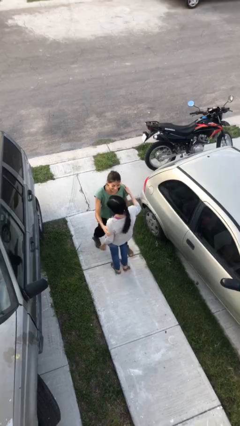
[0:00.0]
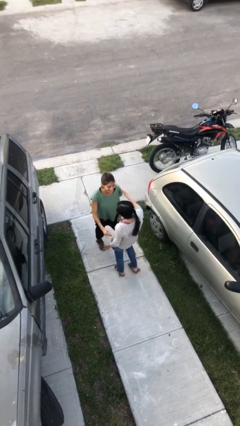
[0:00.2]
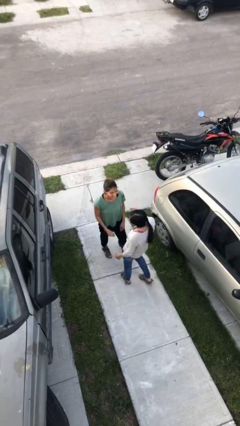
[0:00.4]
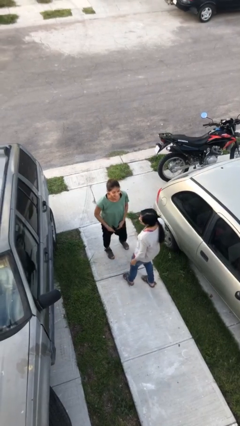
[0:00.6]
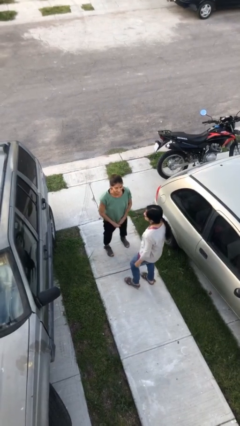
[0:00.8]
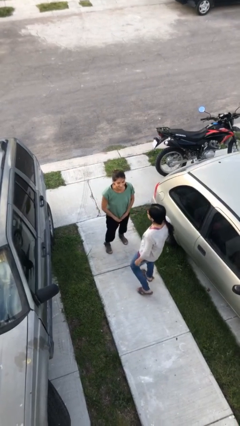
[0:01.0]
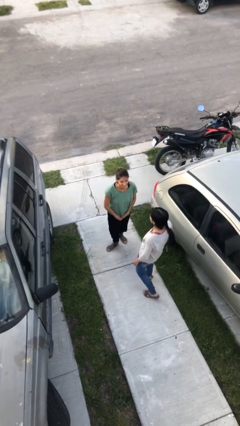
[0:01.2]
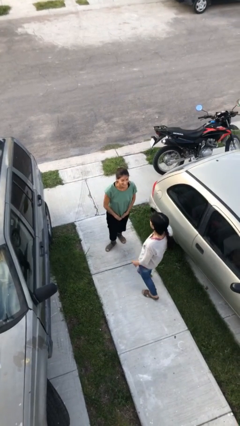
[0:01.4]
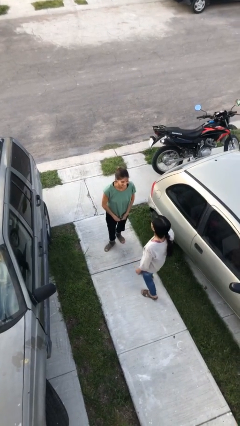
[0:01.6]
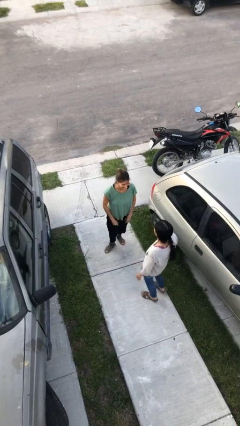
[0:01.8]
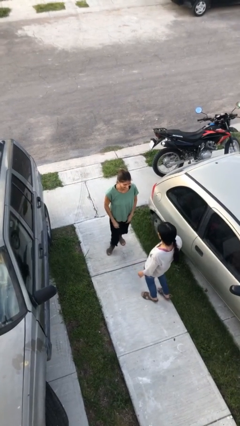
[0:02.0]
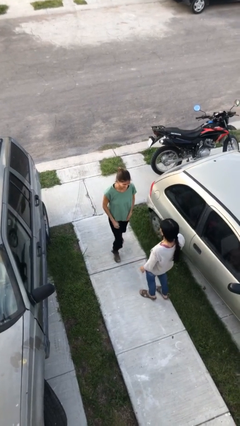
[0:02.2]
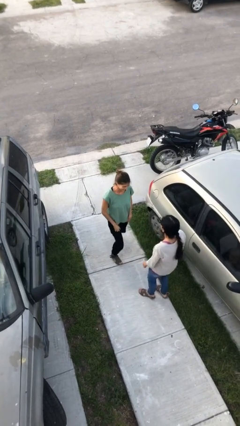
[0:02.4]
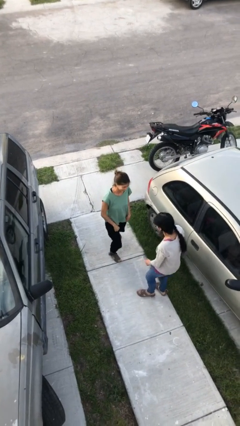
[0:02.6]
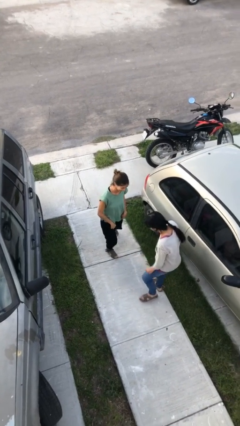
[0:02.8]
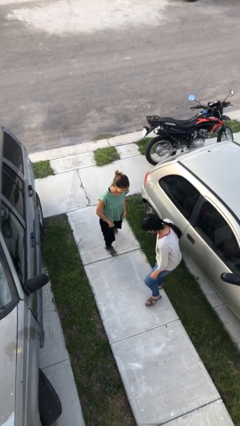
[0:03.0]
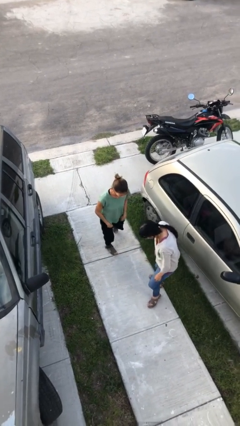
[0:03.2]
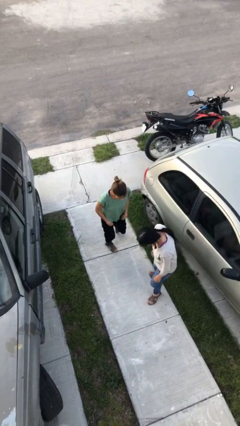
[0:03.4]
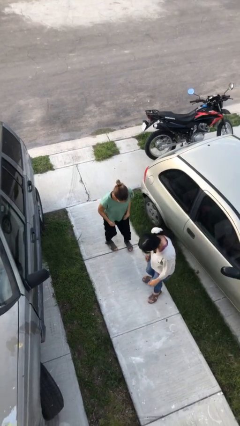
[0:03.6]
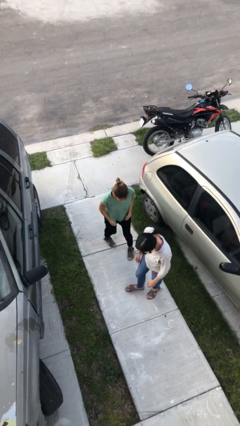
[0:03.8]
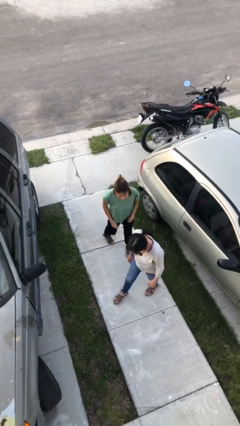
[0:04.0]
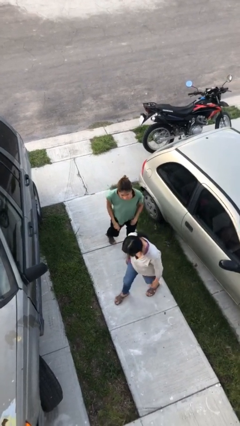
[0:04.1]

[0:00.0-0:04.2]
person talks to person

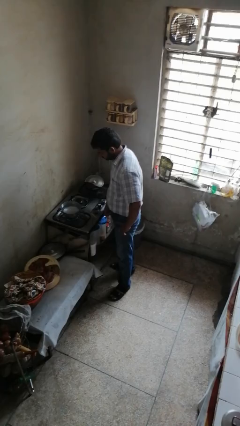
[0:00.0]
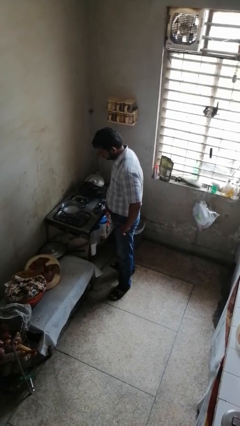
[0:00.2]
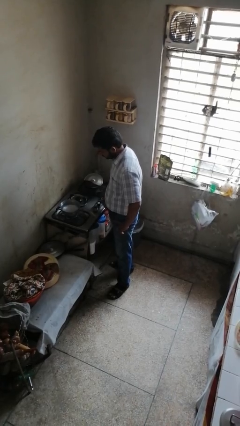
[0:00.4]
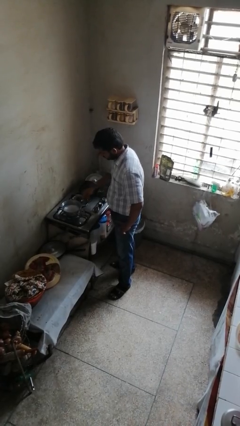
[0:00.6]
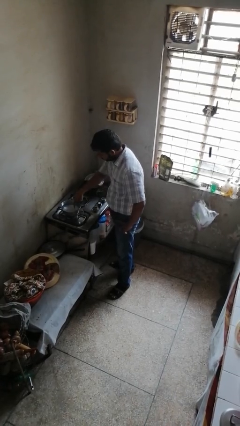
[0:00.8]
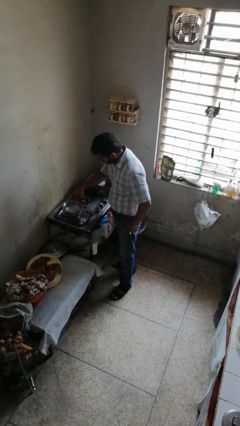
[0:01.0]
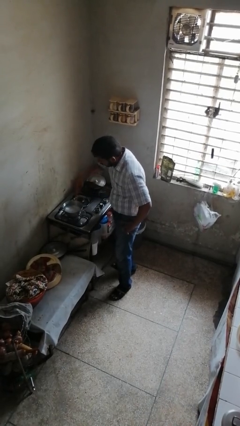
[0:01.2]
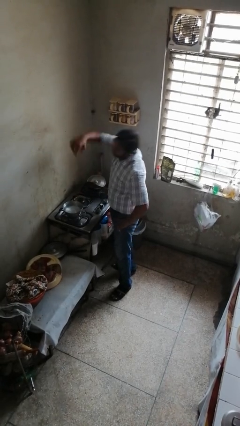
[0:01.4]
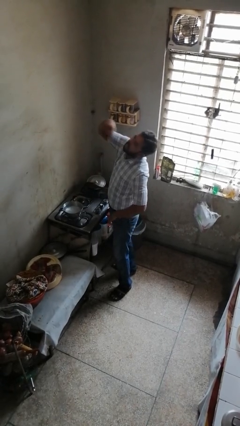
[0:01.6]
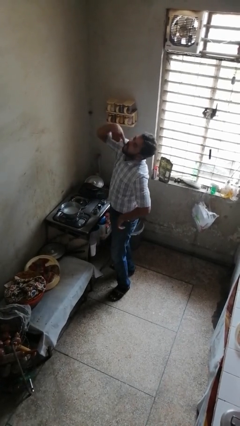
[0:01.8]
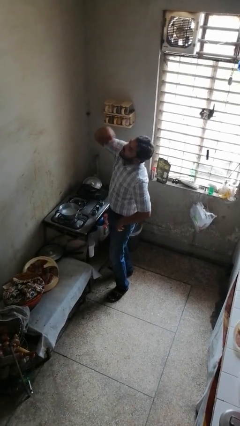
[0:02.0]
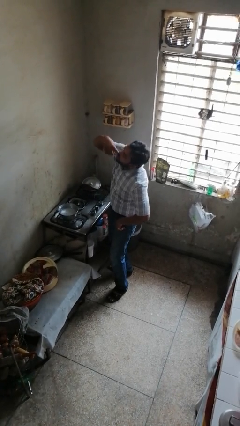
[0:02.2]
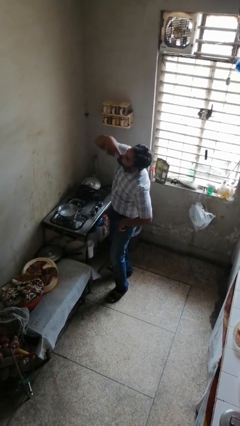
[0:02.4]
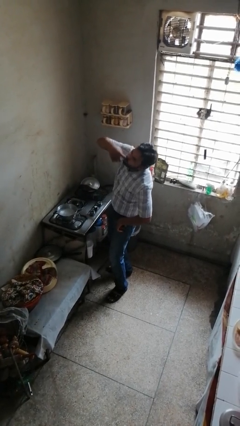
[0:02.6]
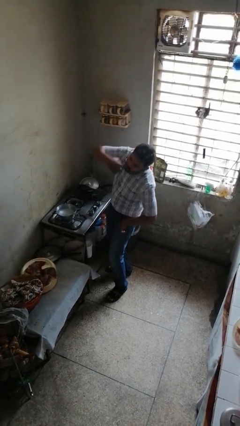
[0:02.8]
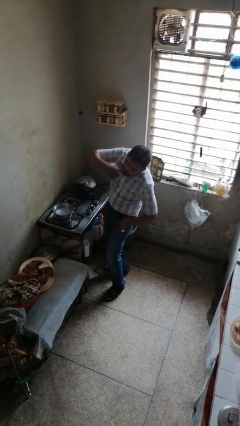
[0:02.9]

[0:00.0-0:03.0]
person burns hand

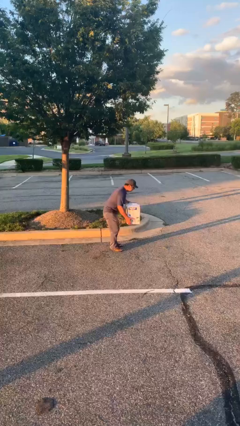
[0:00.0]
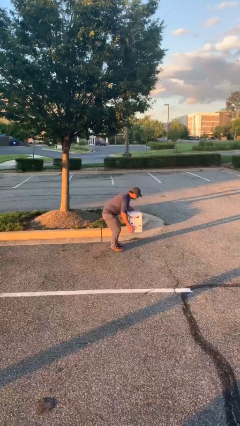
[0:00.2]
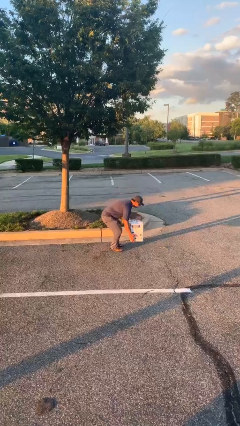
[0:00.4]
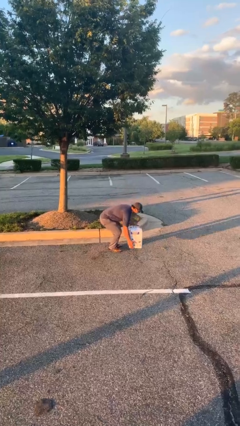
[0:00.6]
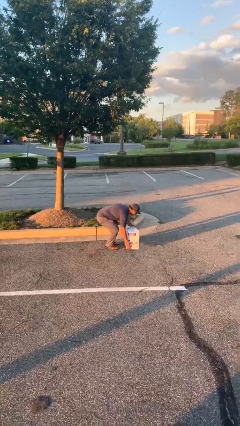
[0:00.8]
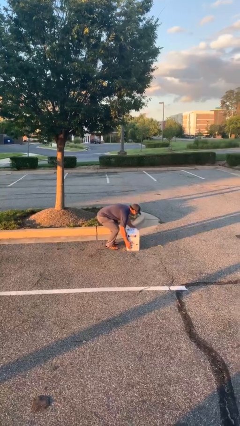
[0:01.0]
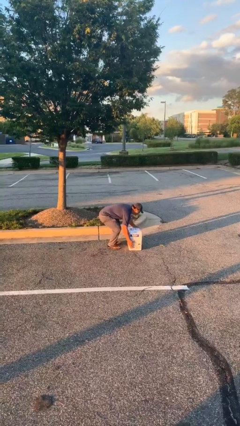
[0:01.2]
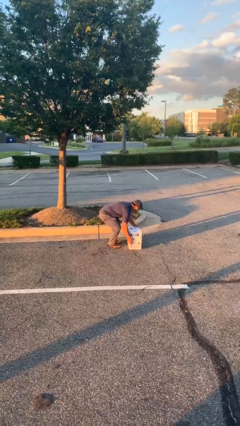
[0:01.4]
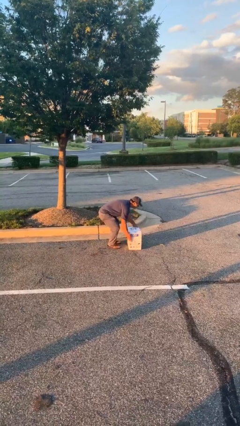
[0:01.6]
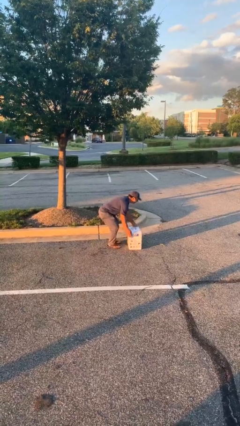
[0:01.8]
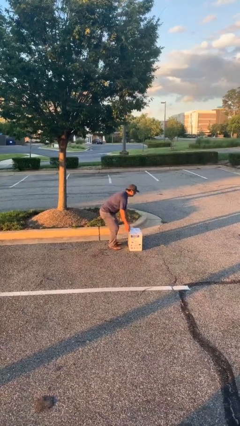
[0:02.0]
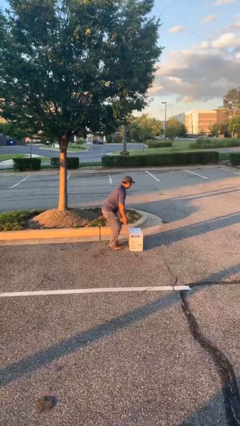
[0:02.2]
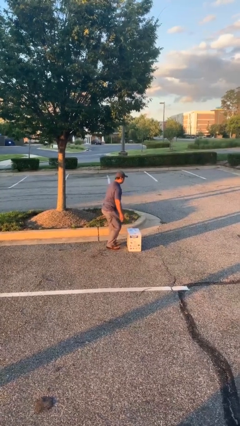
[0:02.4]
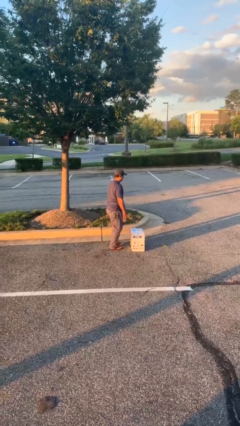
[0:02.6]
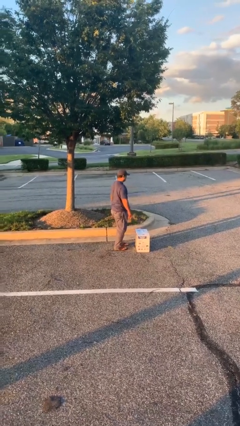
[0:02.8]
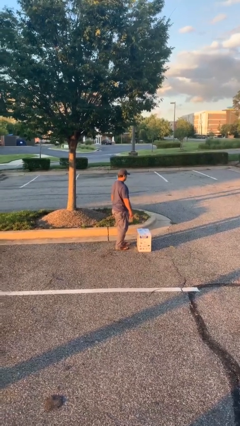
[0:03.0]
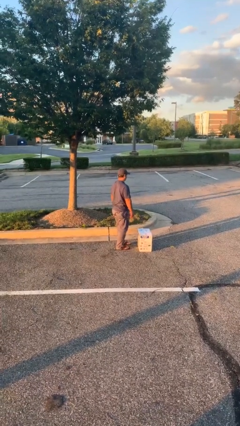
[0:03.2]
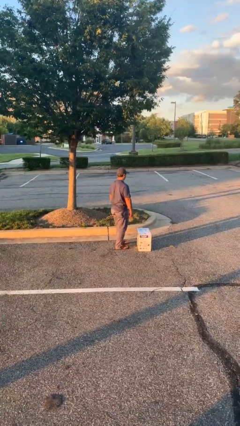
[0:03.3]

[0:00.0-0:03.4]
person puts down object on floor

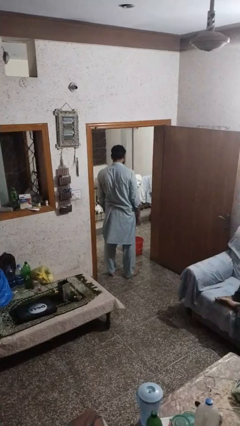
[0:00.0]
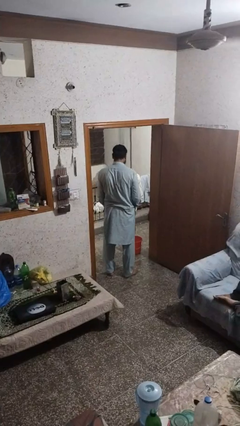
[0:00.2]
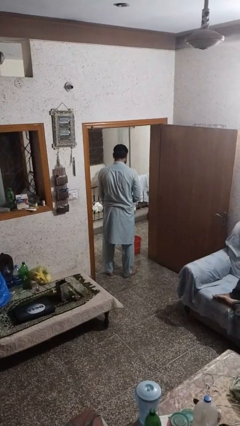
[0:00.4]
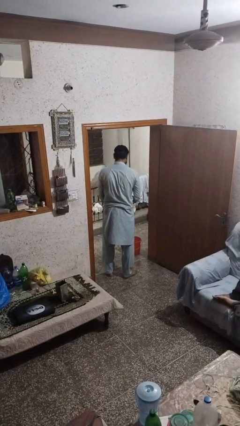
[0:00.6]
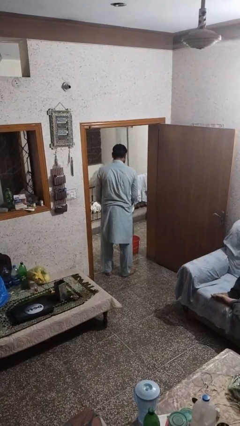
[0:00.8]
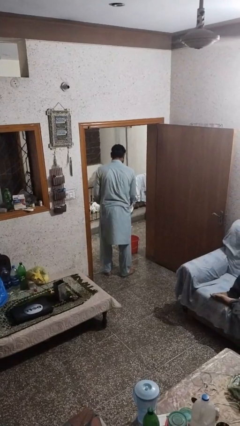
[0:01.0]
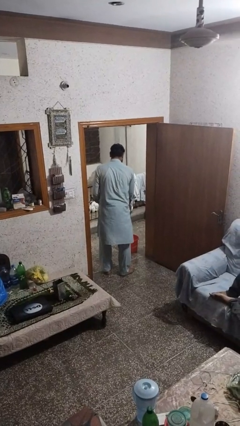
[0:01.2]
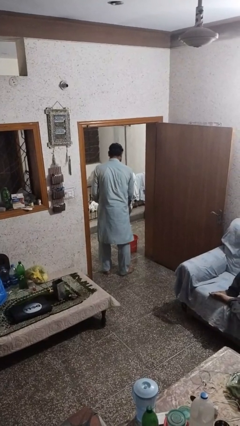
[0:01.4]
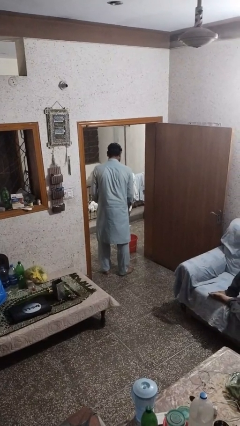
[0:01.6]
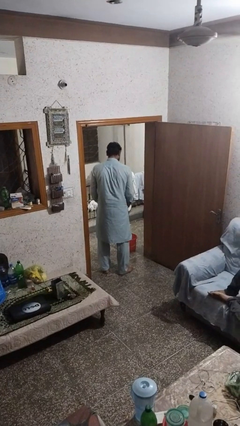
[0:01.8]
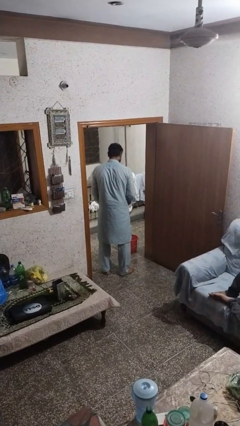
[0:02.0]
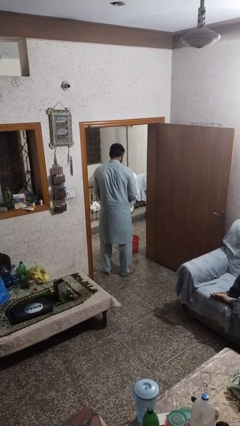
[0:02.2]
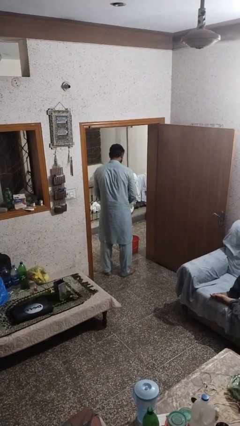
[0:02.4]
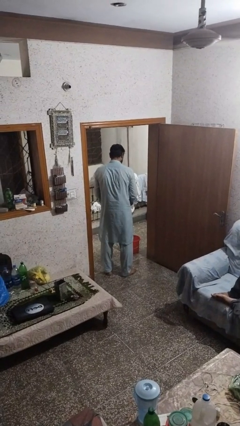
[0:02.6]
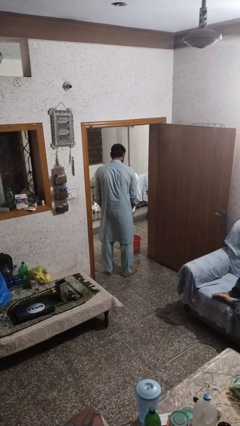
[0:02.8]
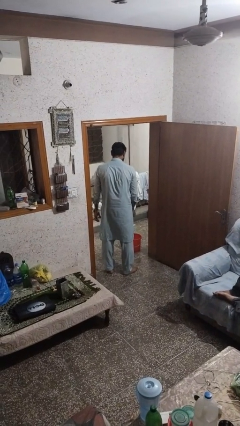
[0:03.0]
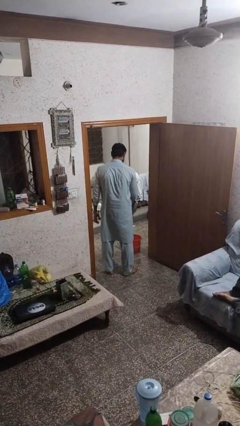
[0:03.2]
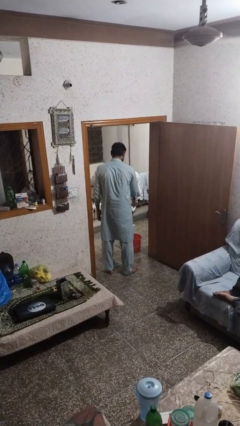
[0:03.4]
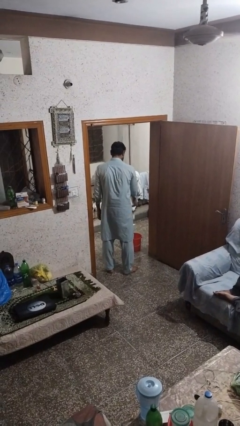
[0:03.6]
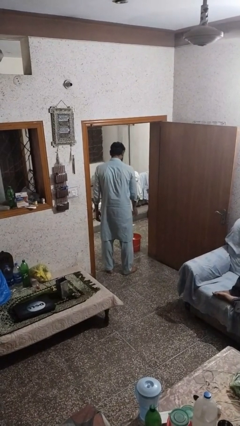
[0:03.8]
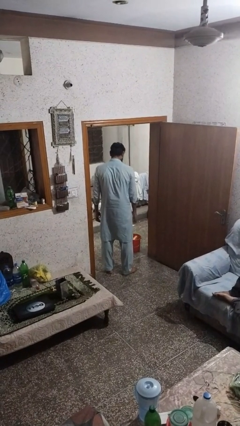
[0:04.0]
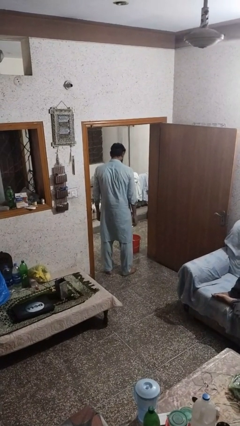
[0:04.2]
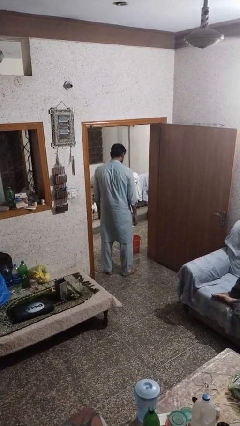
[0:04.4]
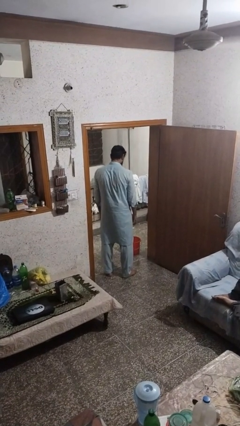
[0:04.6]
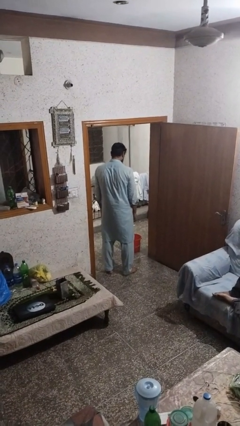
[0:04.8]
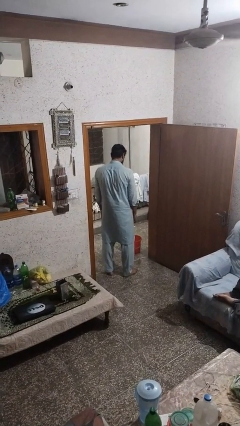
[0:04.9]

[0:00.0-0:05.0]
person discards trash

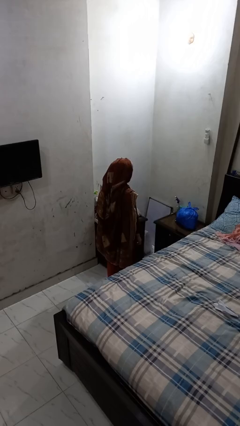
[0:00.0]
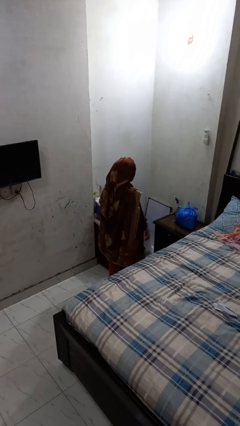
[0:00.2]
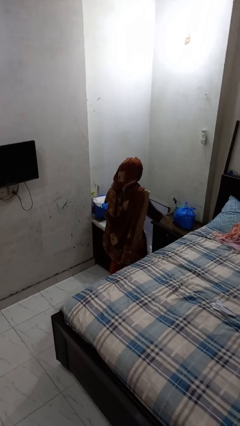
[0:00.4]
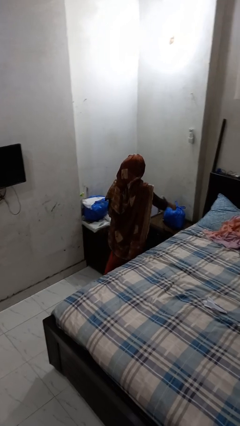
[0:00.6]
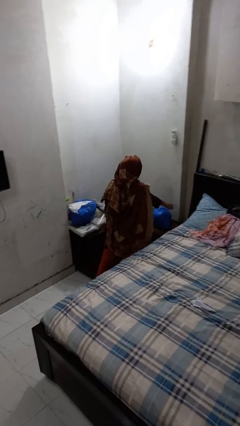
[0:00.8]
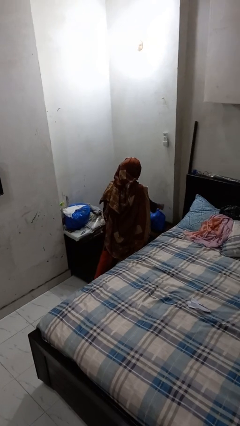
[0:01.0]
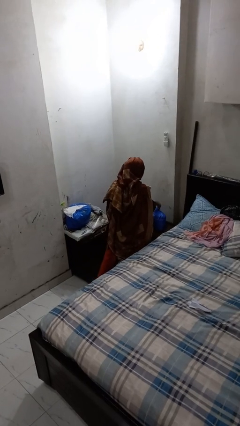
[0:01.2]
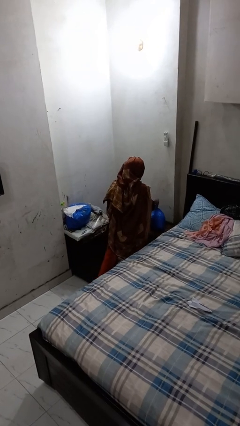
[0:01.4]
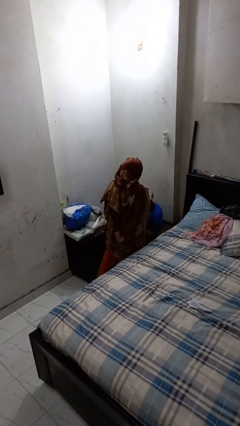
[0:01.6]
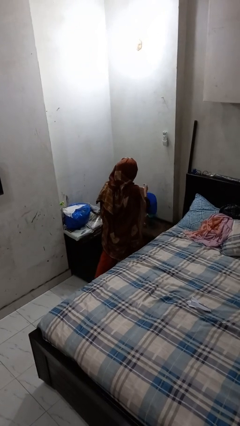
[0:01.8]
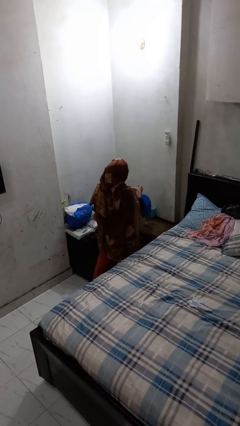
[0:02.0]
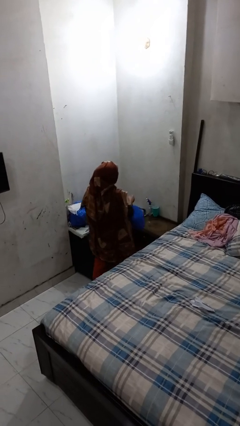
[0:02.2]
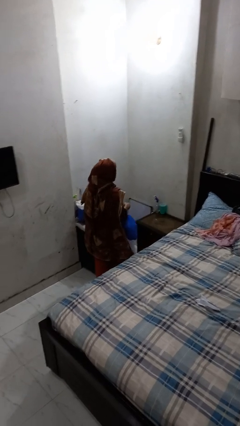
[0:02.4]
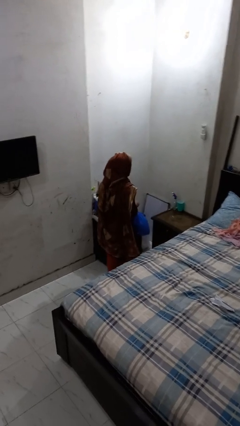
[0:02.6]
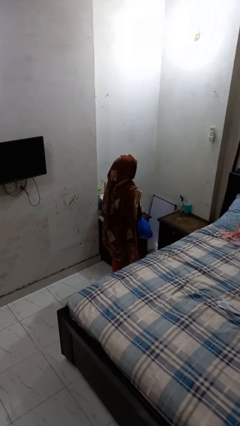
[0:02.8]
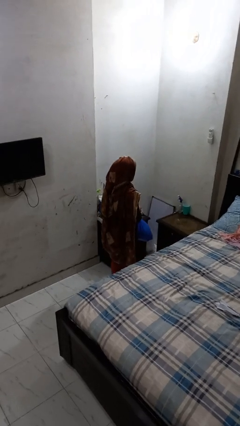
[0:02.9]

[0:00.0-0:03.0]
person picks up object from table
